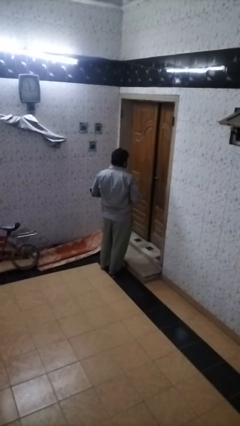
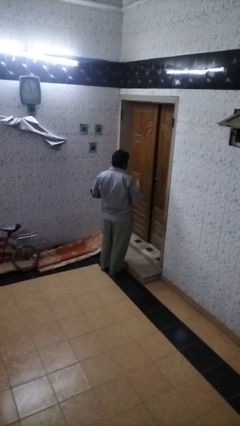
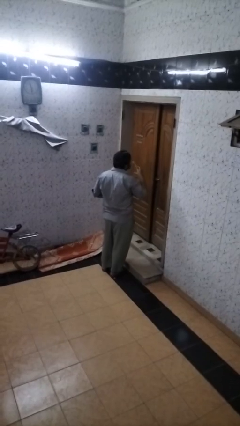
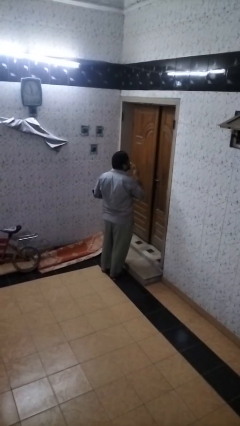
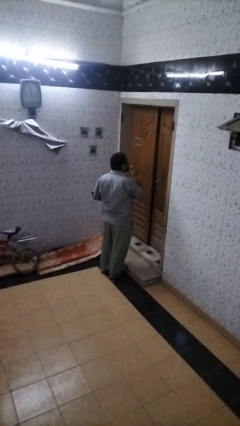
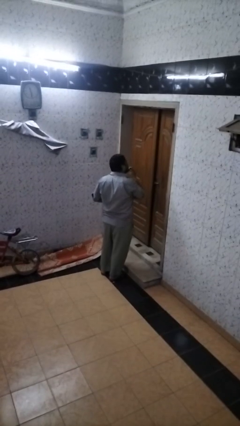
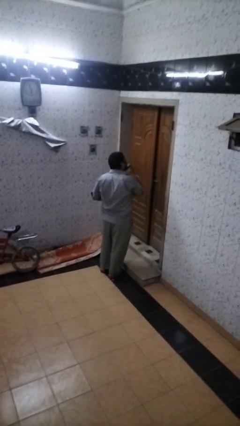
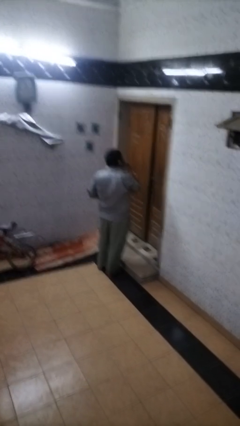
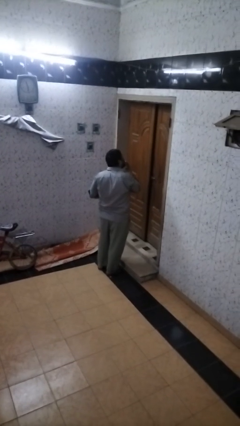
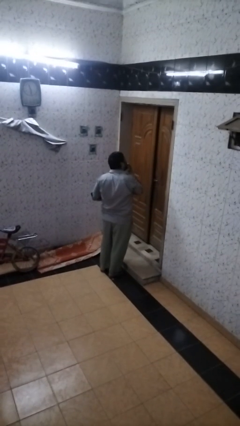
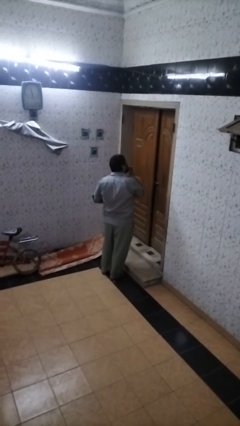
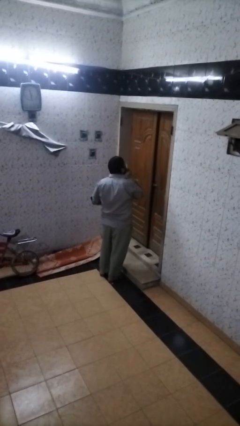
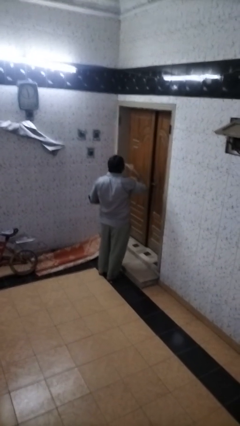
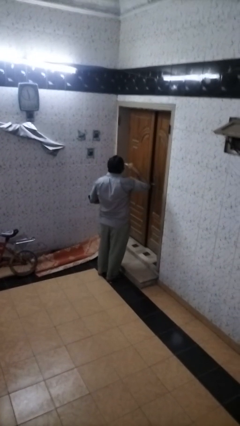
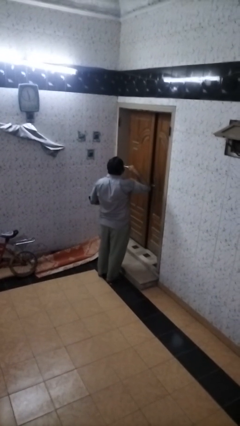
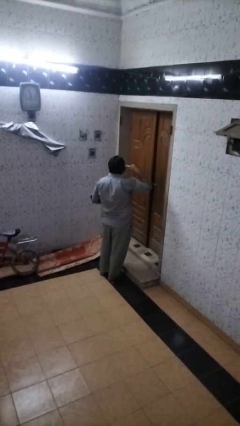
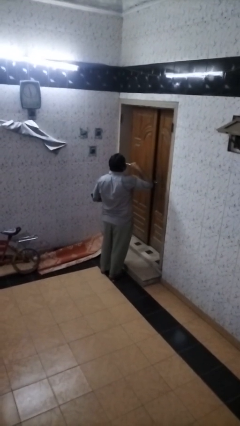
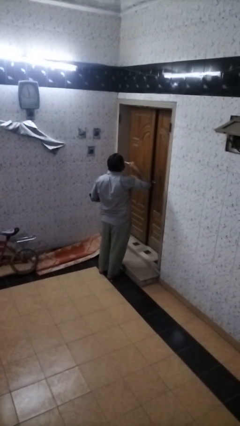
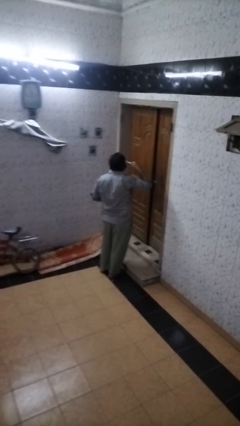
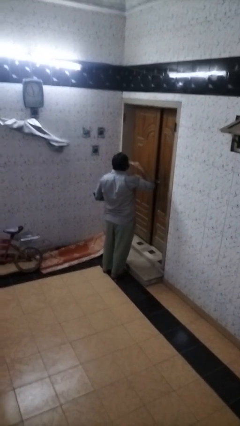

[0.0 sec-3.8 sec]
person brushes teeth

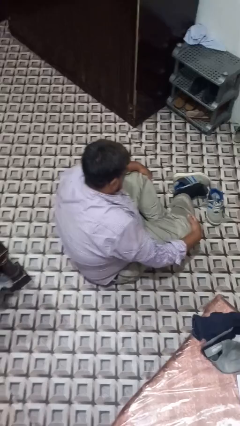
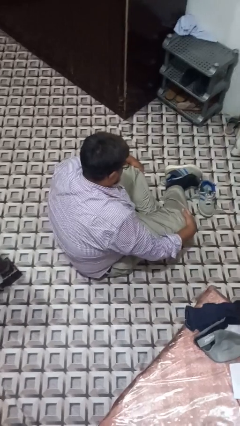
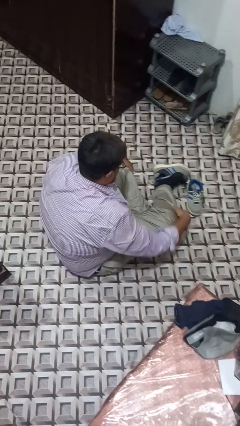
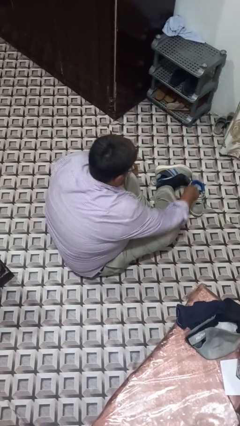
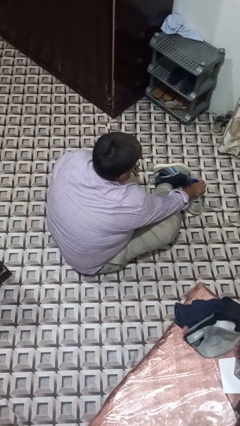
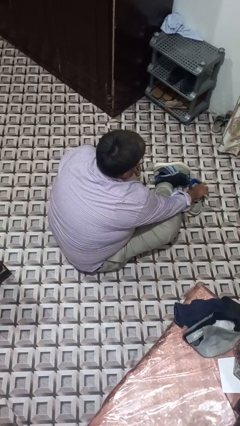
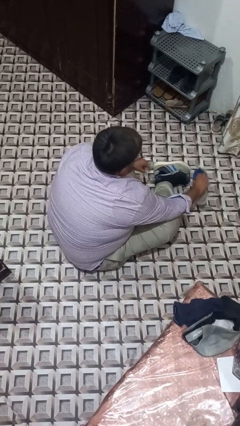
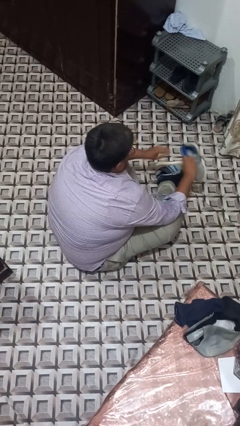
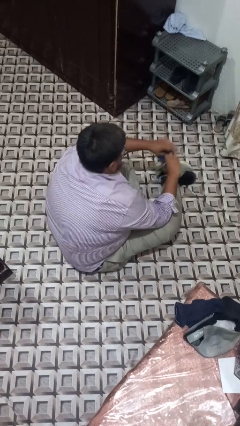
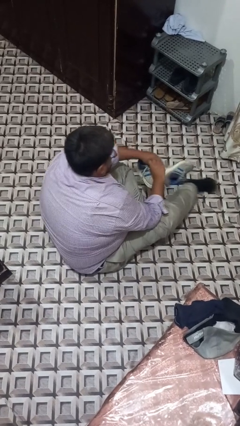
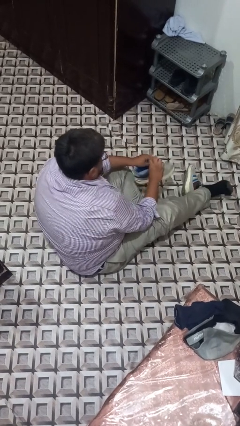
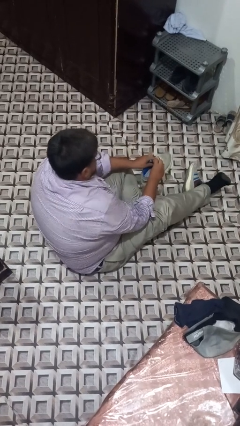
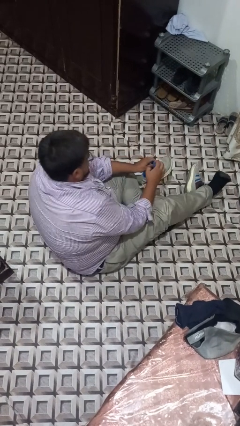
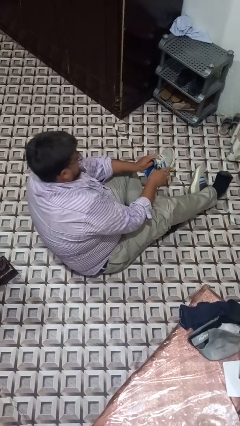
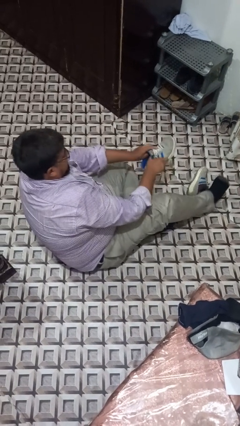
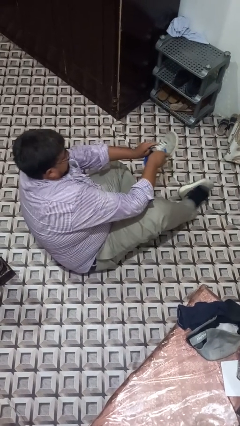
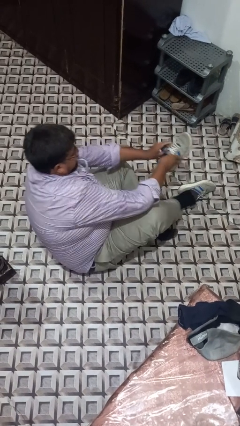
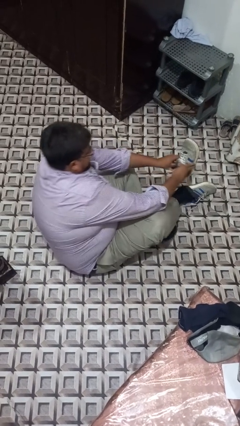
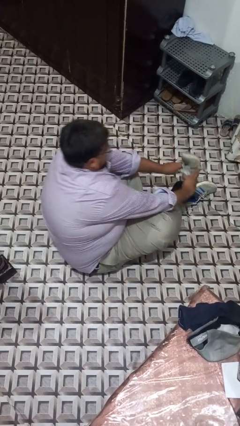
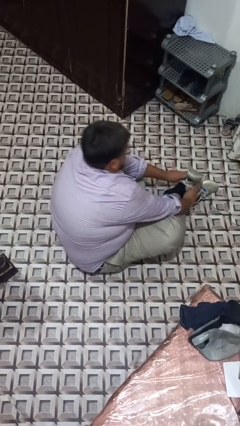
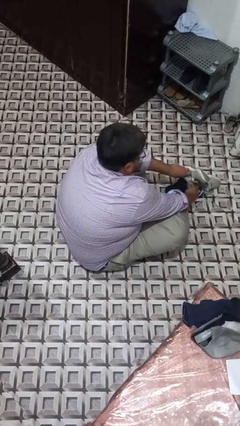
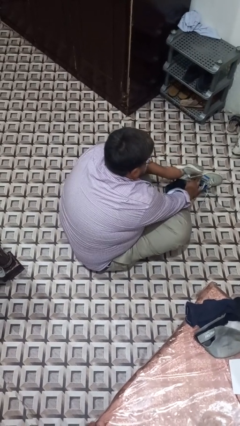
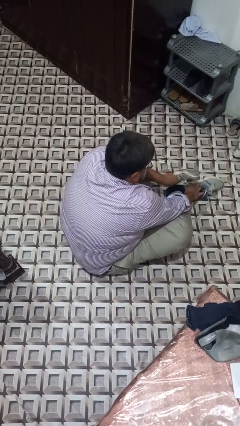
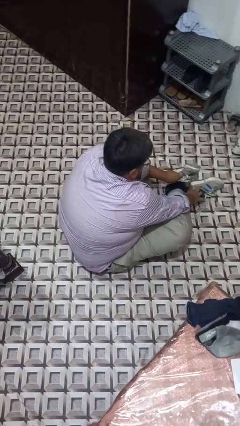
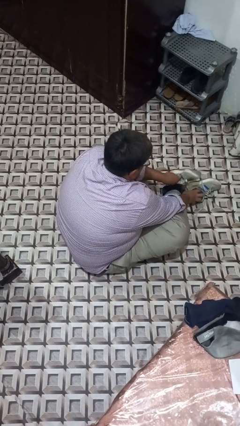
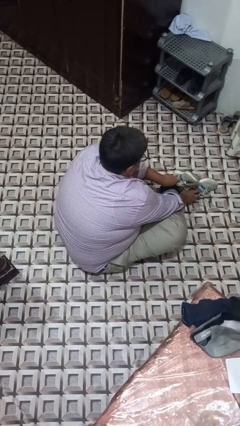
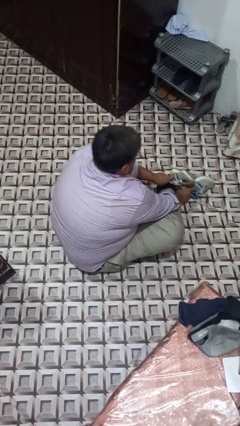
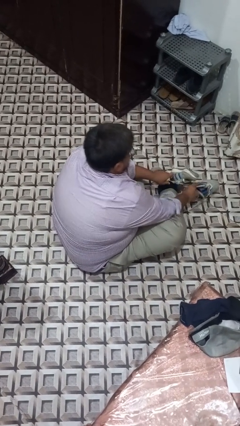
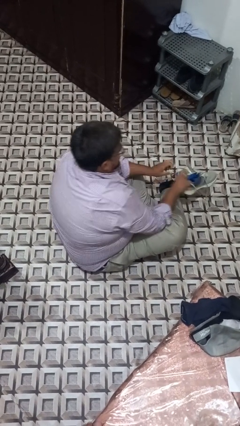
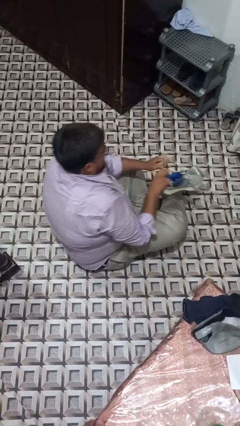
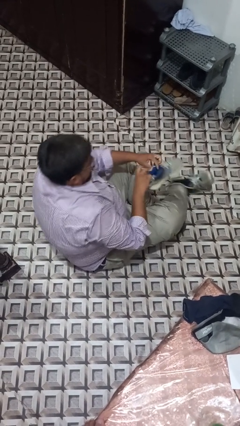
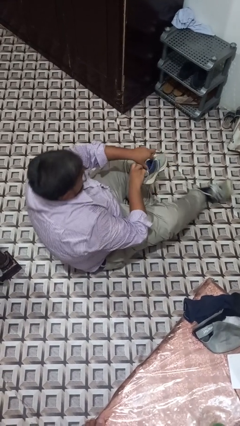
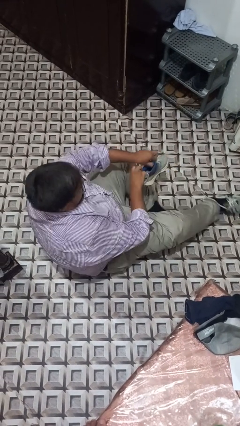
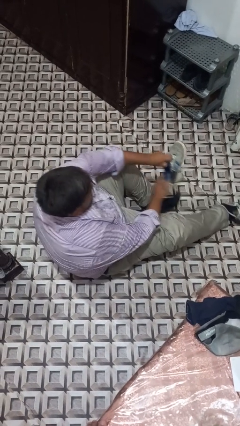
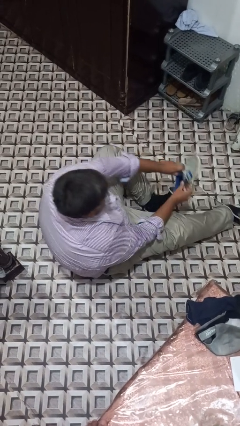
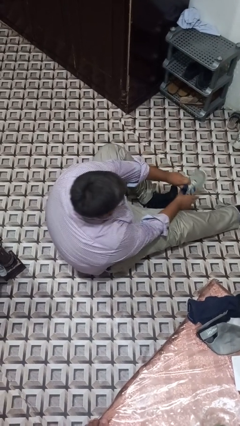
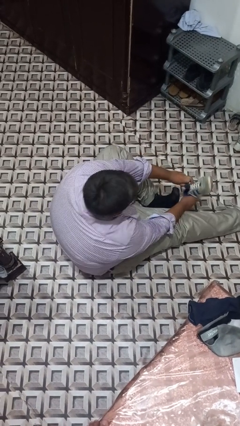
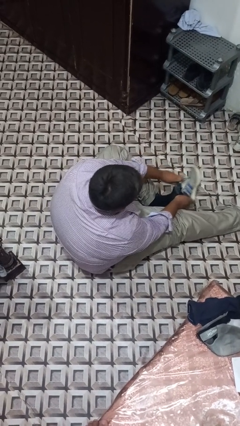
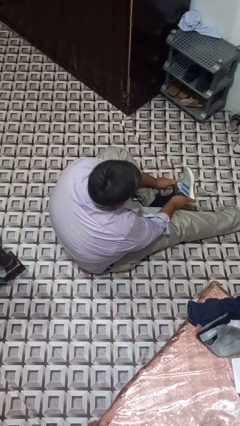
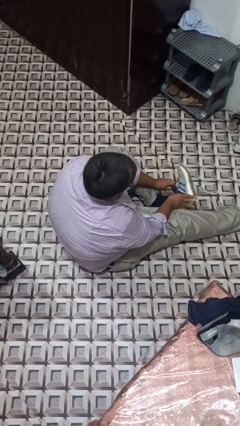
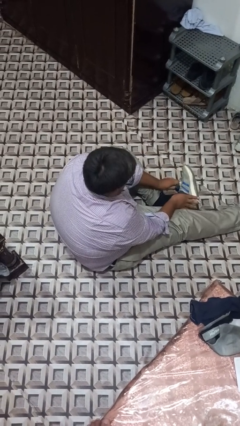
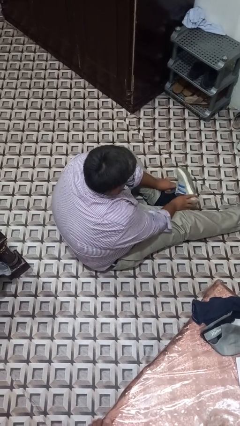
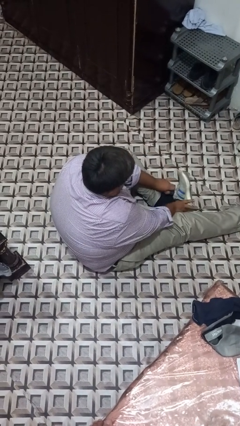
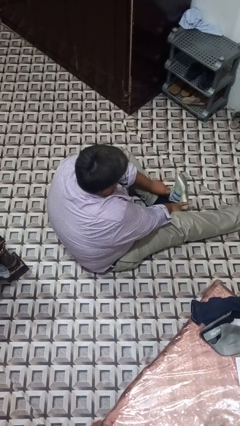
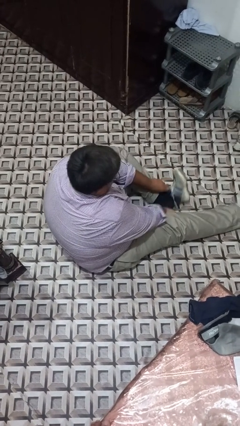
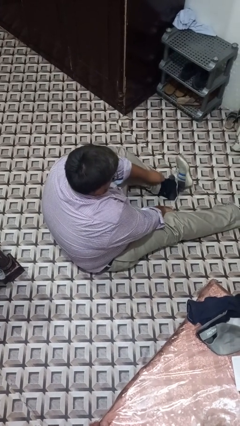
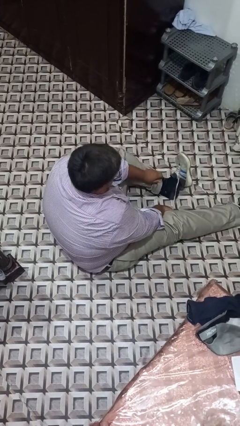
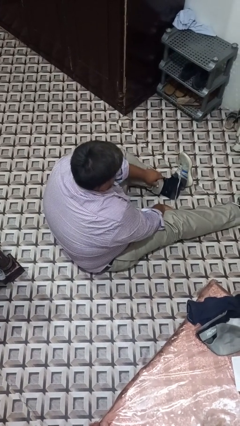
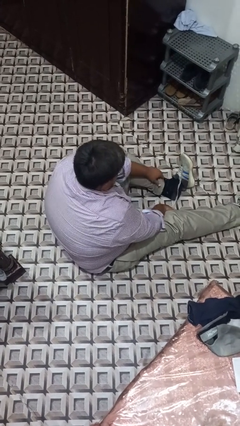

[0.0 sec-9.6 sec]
person puts on shoes

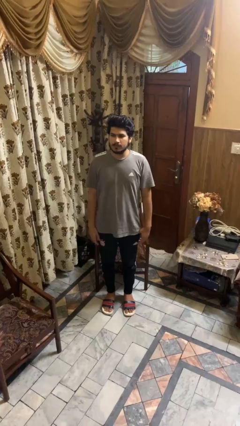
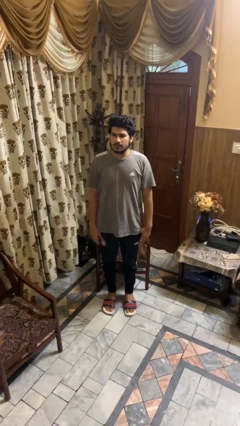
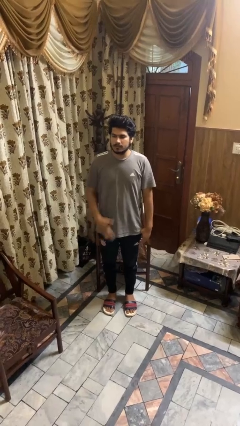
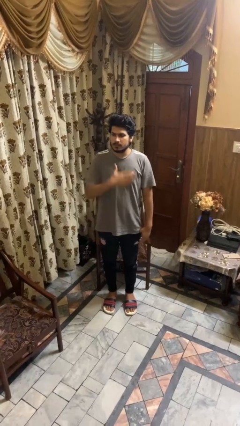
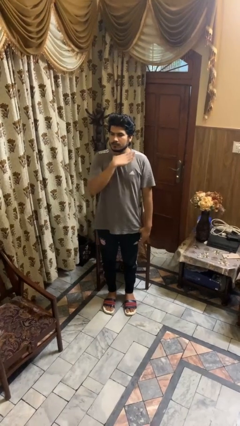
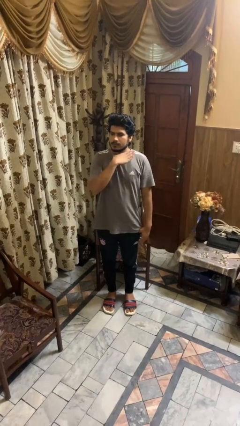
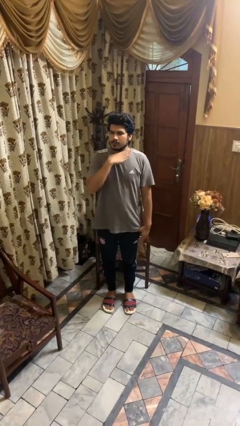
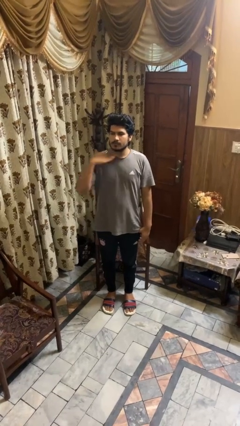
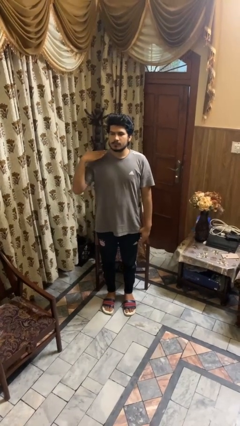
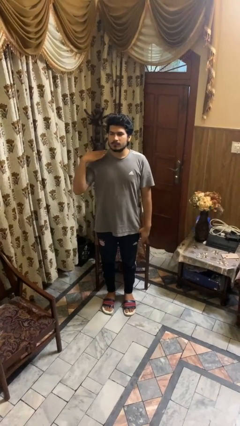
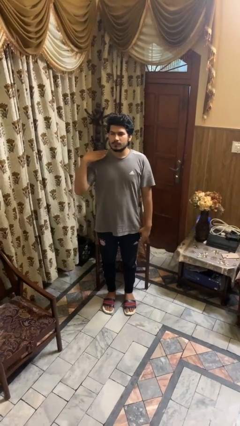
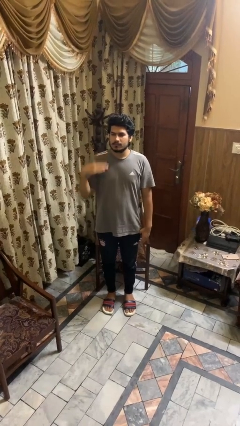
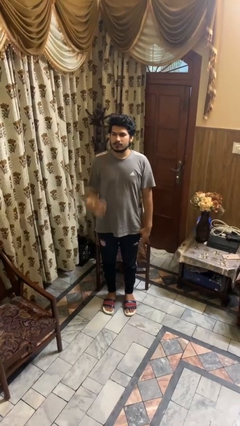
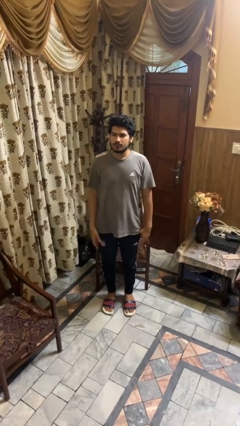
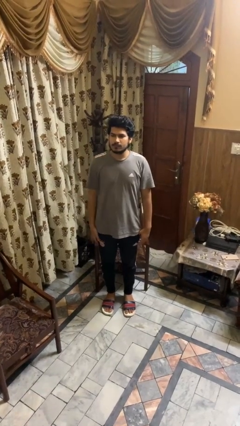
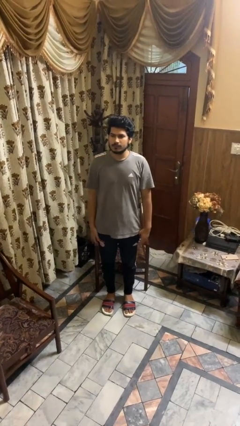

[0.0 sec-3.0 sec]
person gestures cut

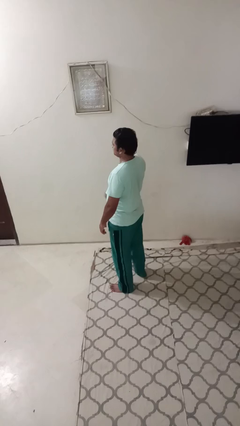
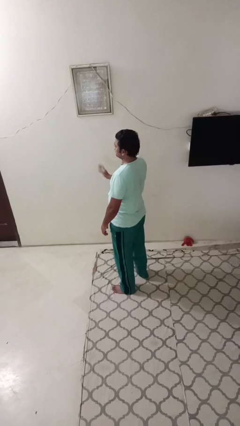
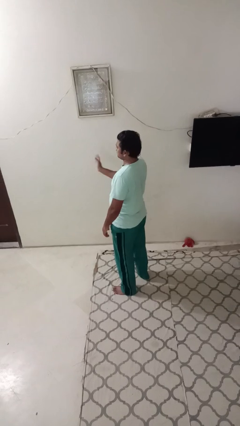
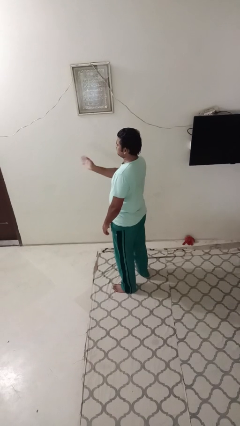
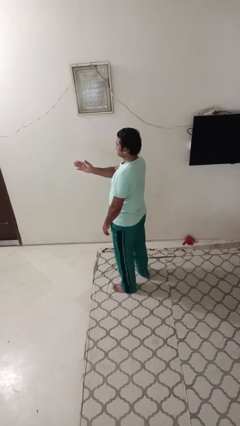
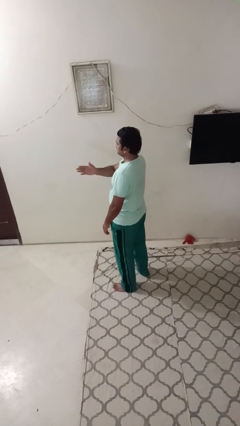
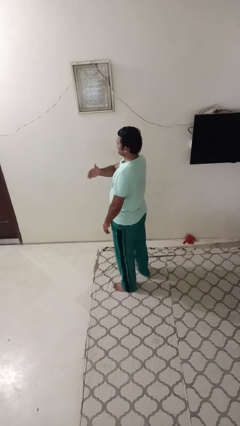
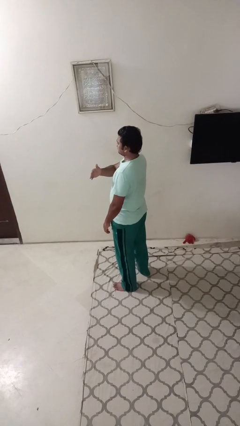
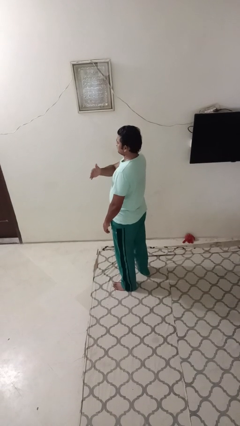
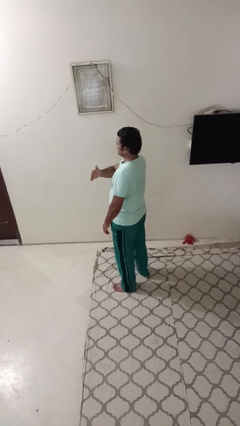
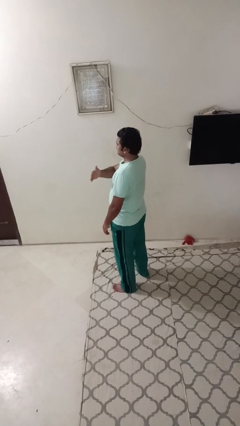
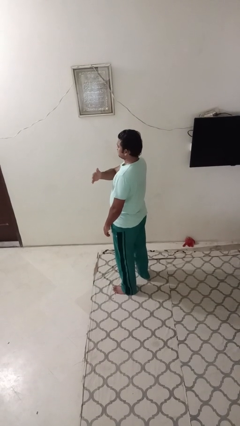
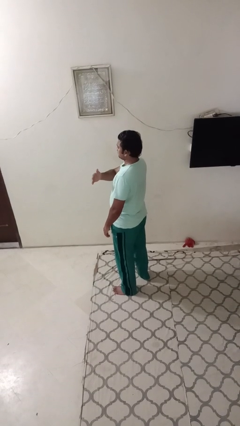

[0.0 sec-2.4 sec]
person gestures swipe left
